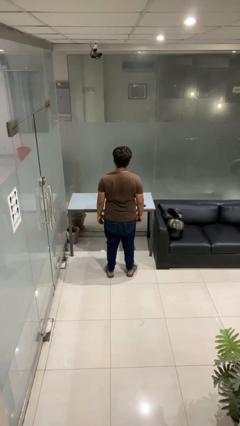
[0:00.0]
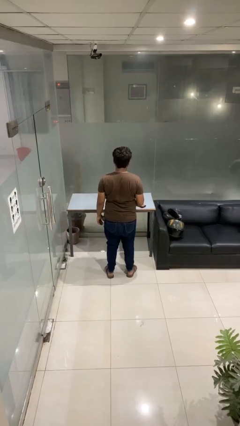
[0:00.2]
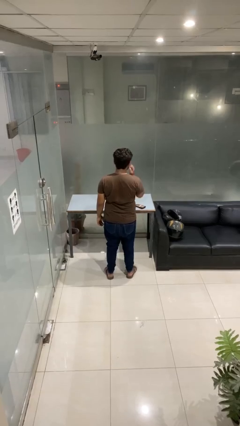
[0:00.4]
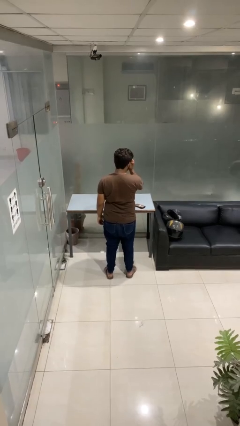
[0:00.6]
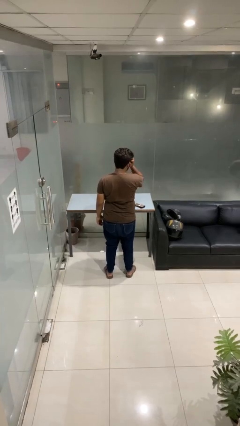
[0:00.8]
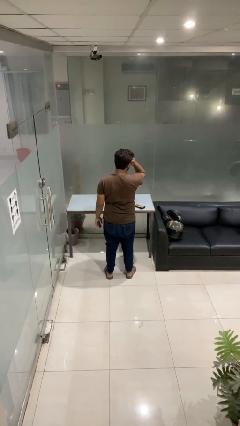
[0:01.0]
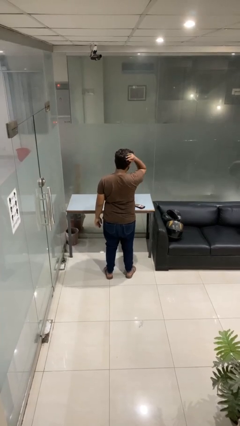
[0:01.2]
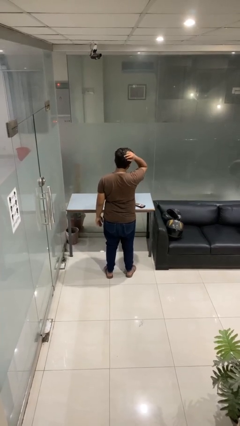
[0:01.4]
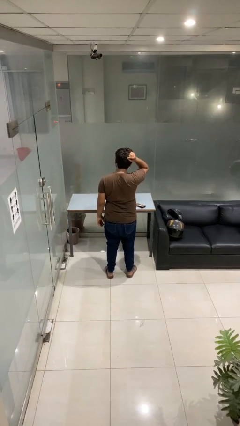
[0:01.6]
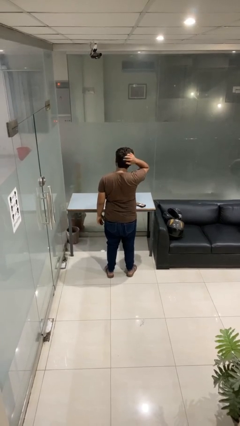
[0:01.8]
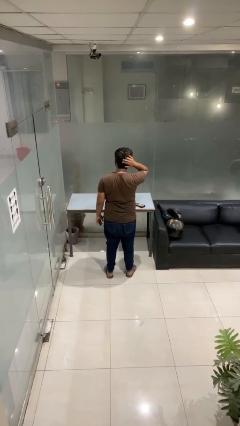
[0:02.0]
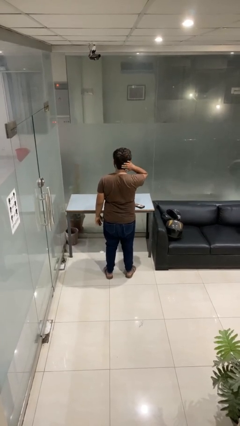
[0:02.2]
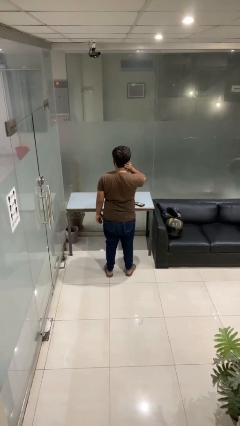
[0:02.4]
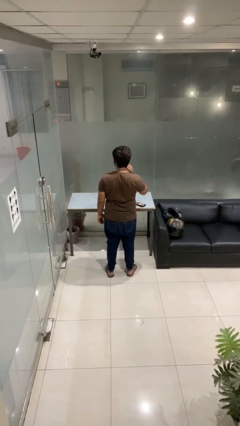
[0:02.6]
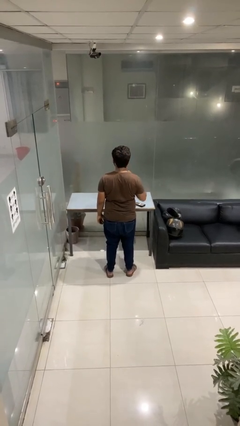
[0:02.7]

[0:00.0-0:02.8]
person strokes hair

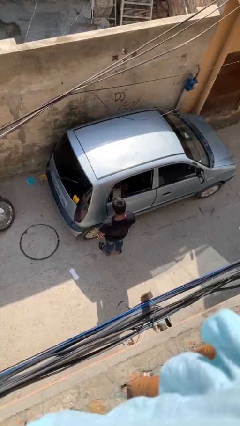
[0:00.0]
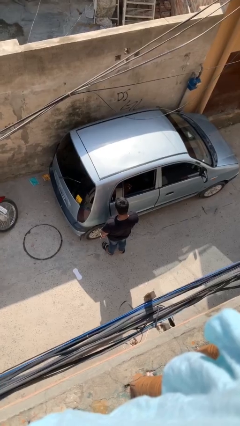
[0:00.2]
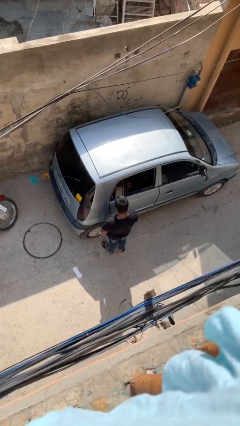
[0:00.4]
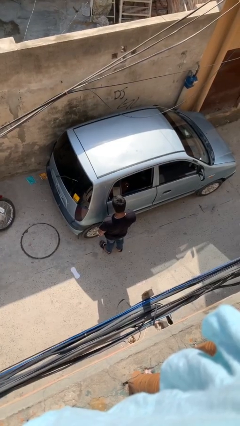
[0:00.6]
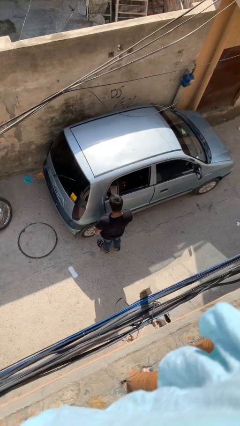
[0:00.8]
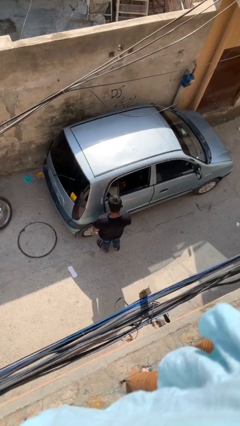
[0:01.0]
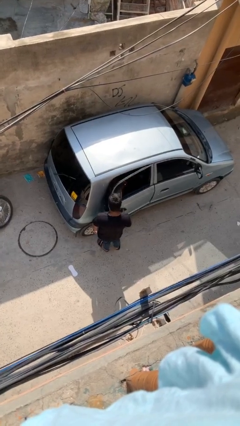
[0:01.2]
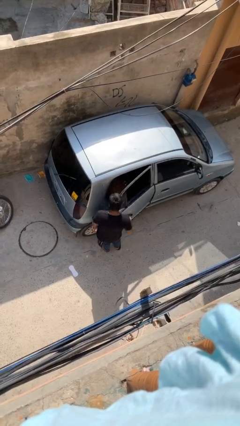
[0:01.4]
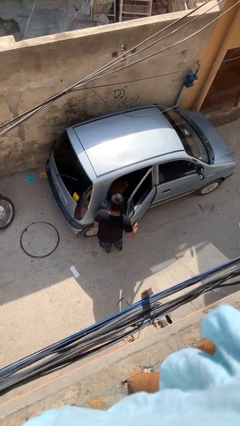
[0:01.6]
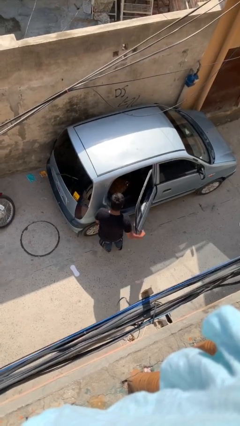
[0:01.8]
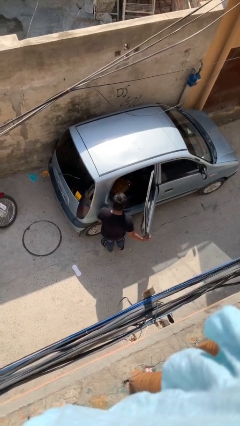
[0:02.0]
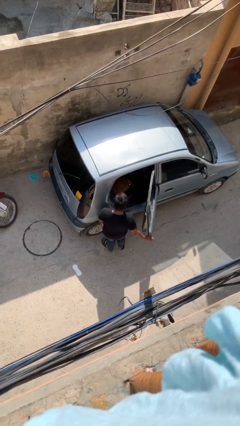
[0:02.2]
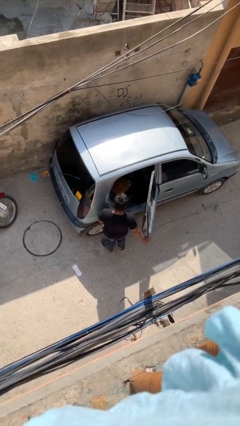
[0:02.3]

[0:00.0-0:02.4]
person opens car door

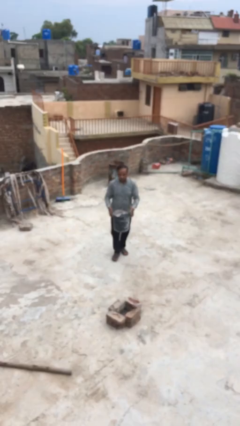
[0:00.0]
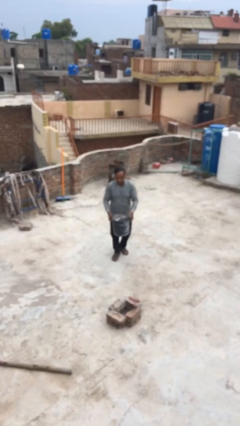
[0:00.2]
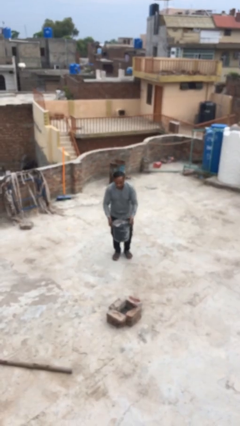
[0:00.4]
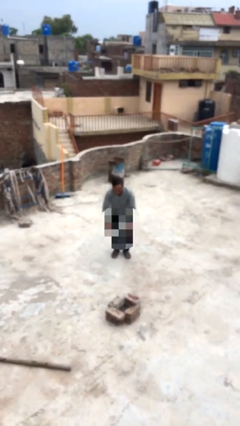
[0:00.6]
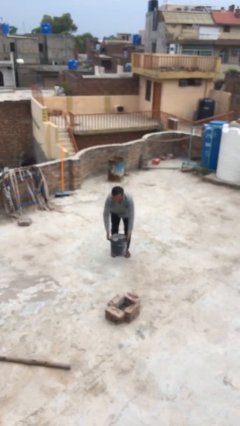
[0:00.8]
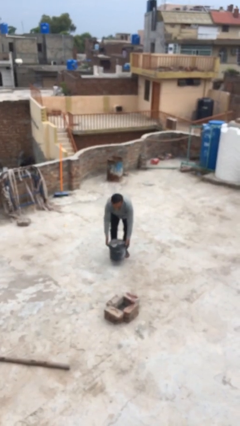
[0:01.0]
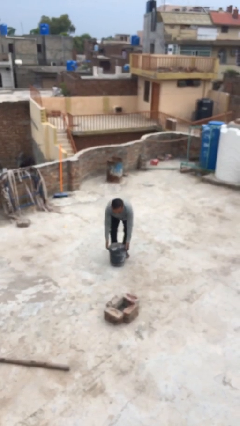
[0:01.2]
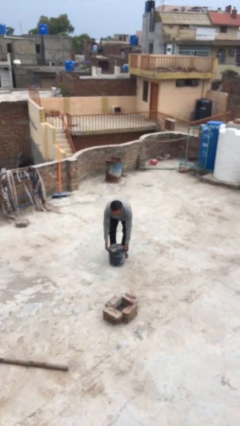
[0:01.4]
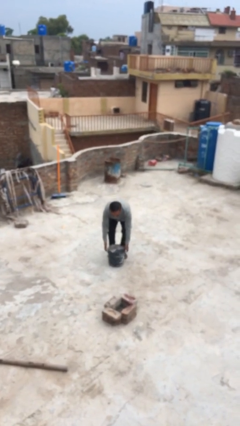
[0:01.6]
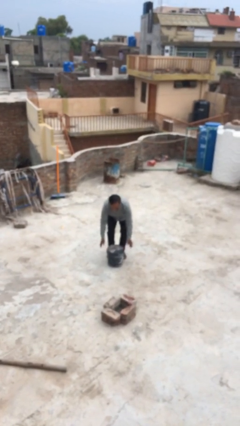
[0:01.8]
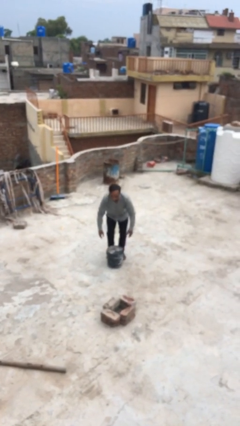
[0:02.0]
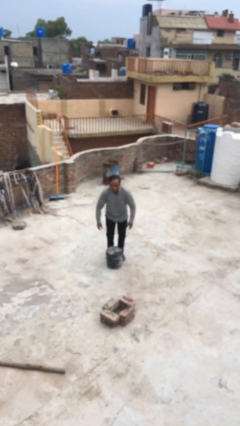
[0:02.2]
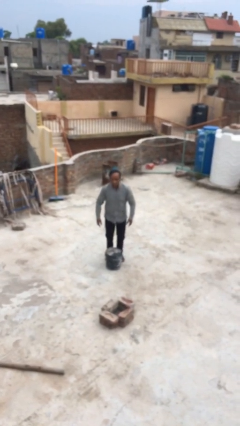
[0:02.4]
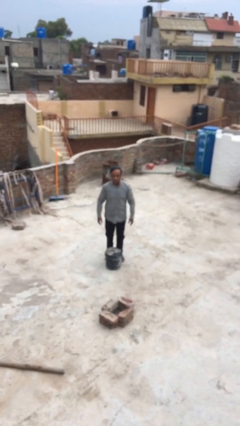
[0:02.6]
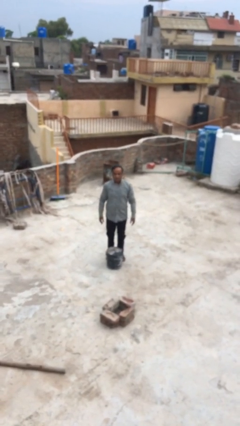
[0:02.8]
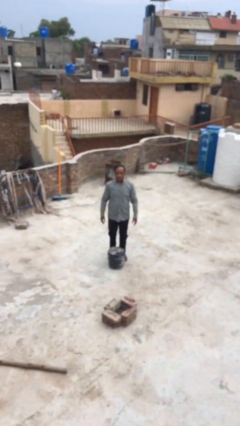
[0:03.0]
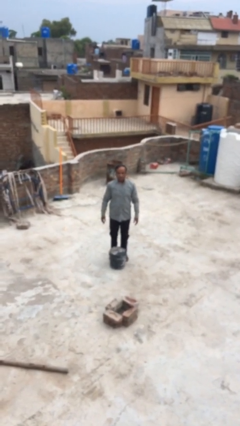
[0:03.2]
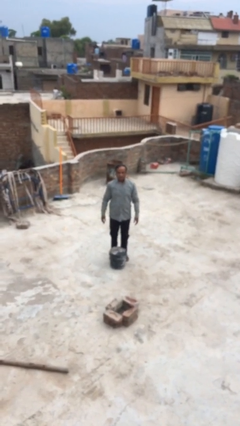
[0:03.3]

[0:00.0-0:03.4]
person puts down object on floor

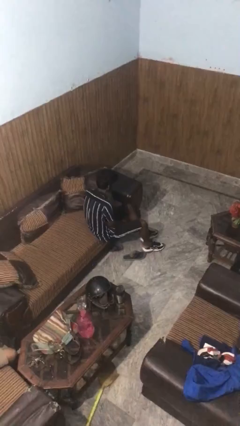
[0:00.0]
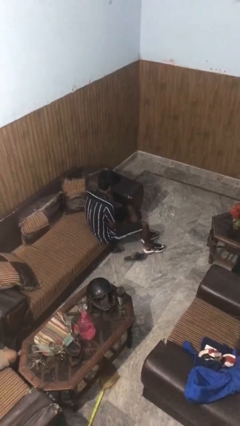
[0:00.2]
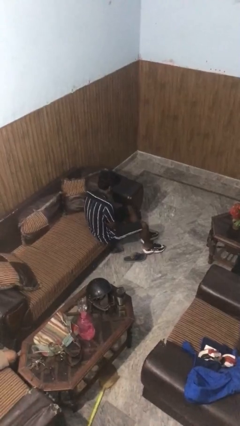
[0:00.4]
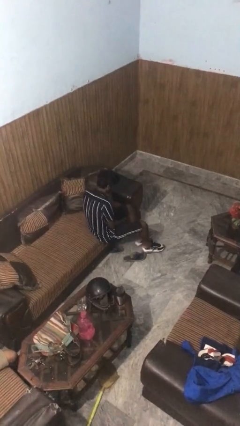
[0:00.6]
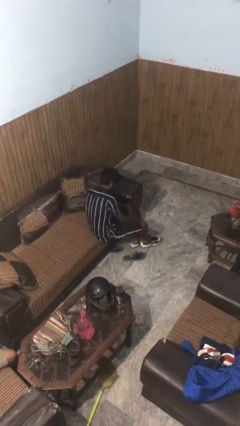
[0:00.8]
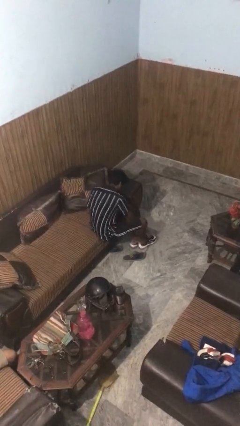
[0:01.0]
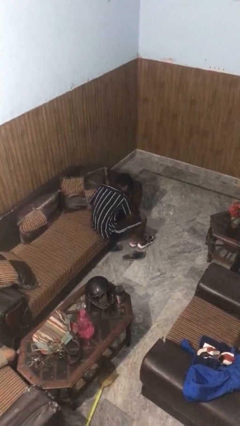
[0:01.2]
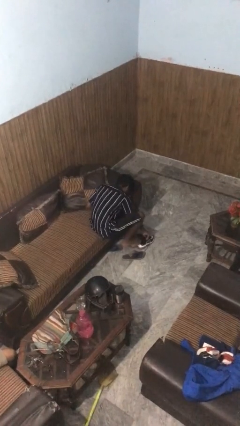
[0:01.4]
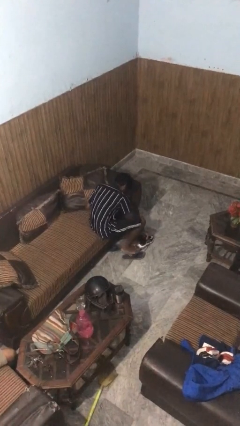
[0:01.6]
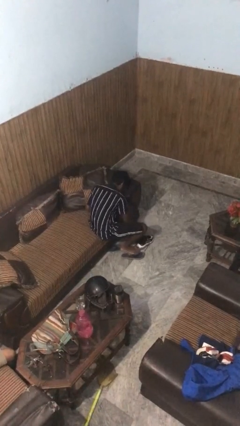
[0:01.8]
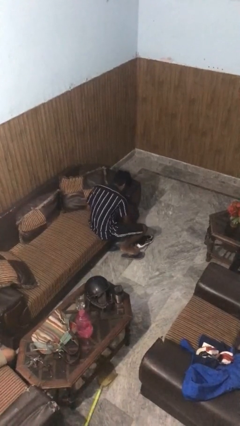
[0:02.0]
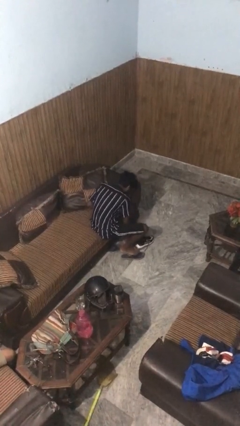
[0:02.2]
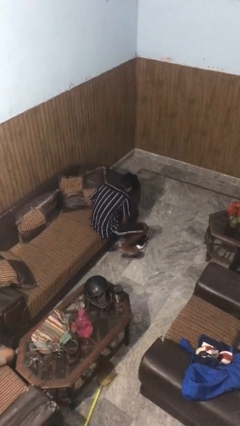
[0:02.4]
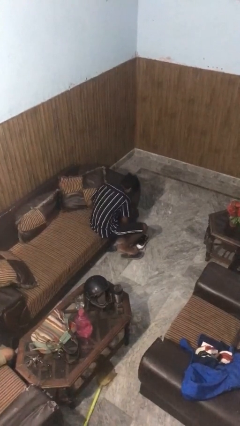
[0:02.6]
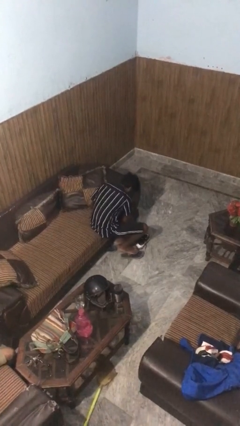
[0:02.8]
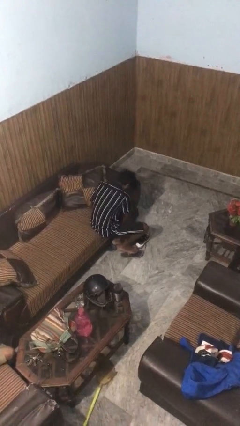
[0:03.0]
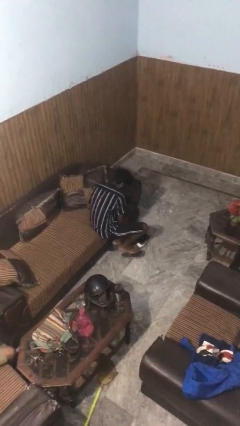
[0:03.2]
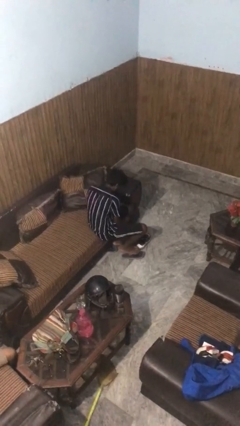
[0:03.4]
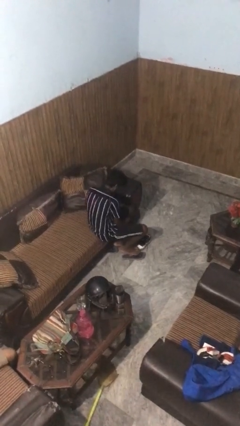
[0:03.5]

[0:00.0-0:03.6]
person takes off shoes

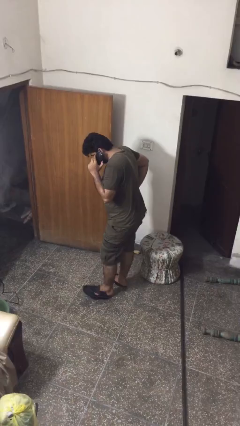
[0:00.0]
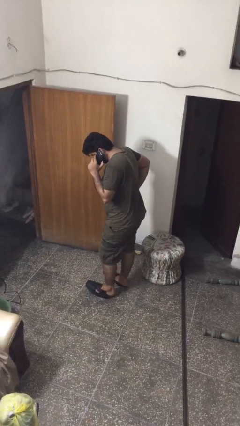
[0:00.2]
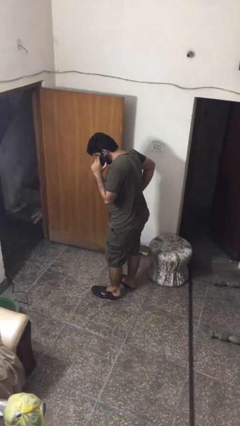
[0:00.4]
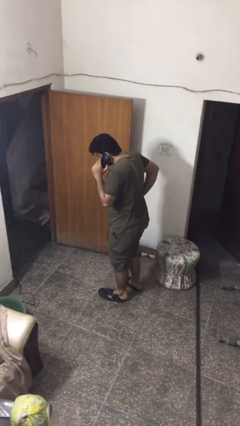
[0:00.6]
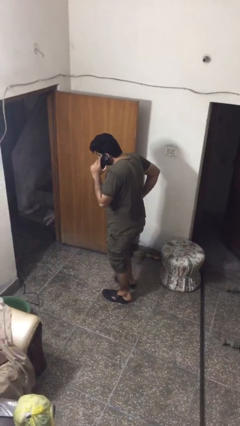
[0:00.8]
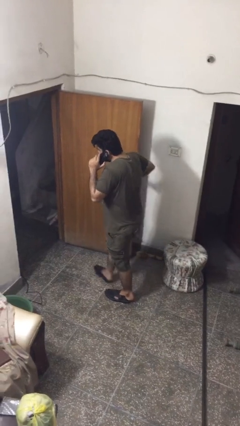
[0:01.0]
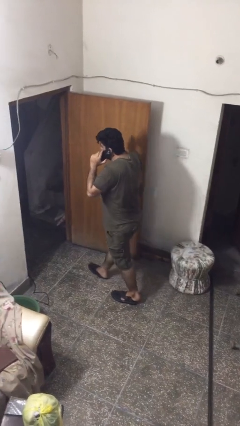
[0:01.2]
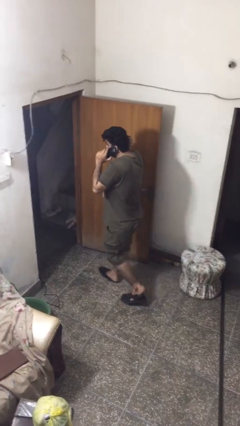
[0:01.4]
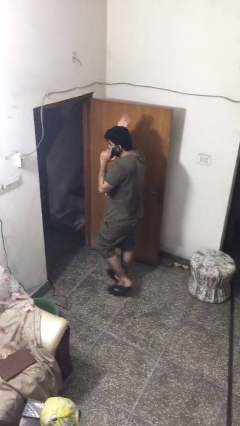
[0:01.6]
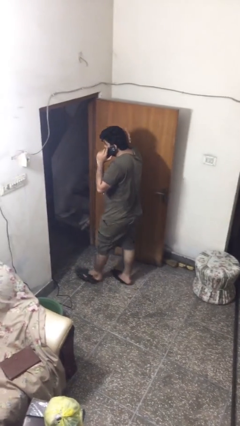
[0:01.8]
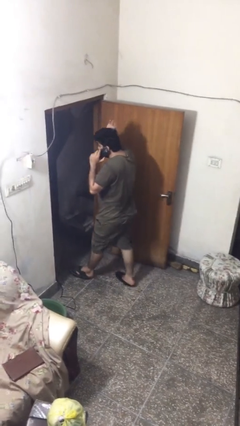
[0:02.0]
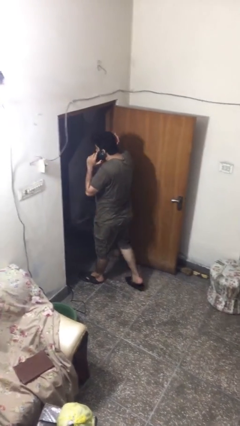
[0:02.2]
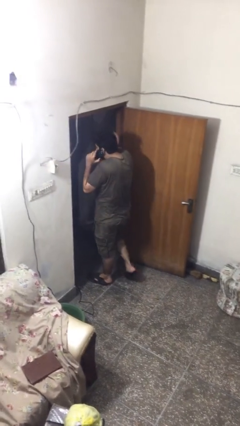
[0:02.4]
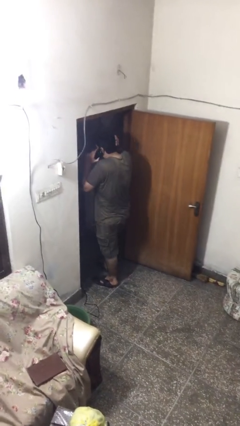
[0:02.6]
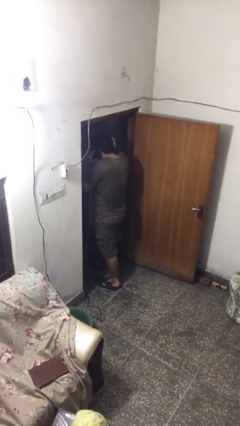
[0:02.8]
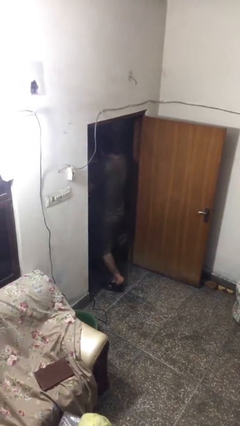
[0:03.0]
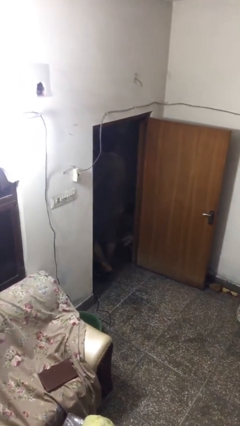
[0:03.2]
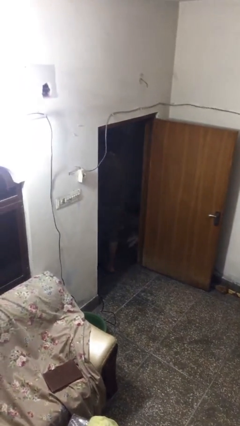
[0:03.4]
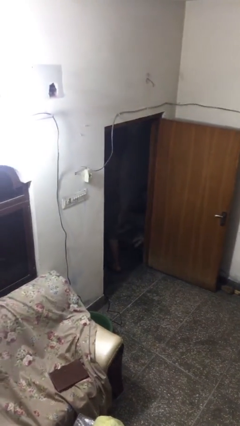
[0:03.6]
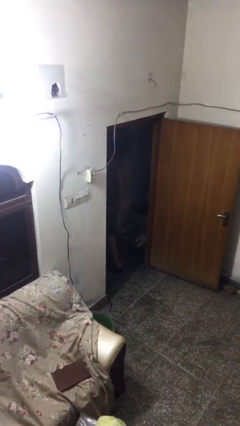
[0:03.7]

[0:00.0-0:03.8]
person exits scene through structure

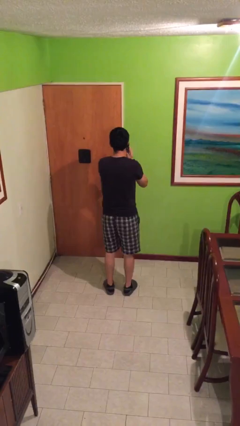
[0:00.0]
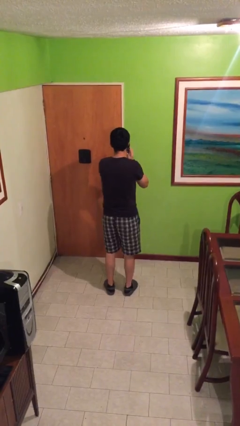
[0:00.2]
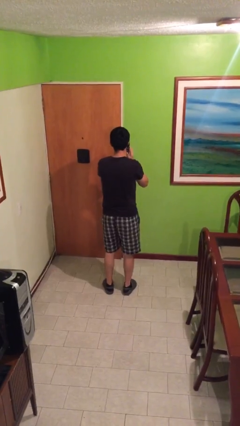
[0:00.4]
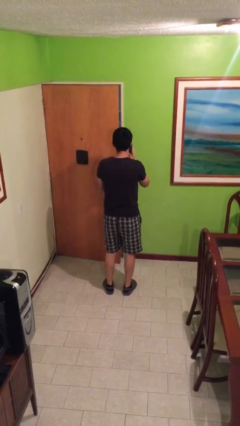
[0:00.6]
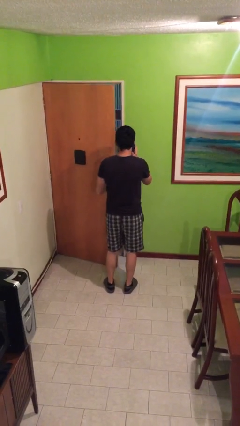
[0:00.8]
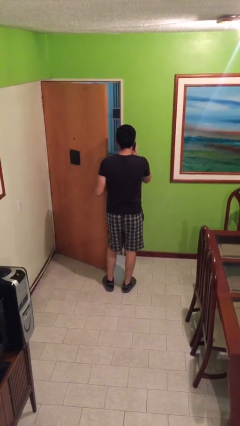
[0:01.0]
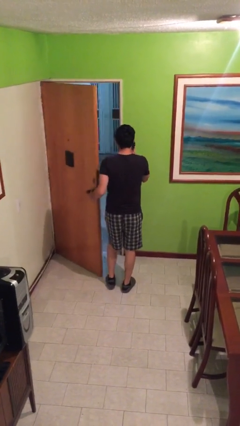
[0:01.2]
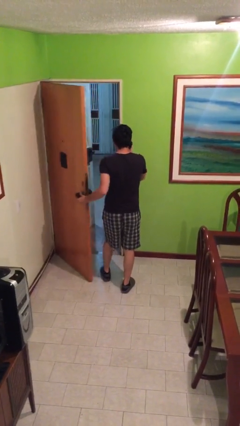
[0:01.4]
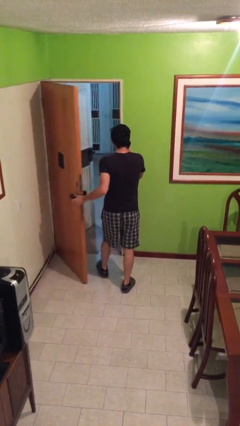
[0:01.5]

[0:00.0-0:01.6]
person opens facility door
